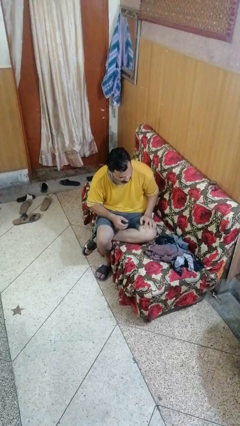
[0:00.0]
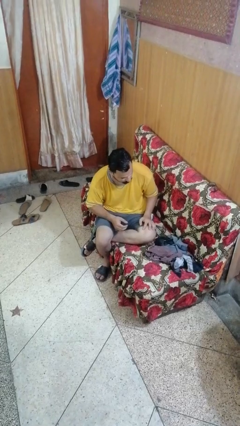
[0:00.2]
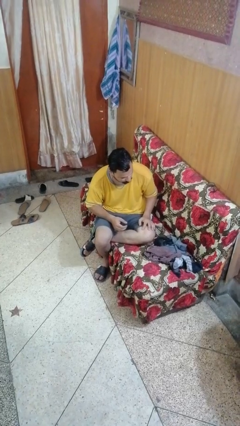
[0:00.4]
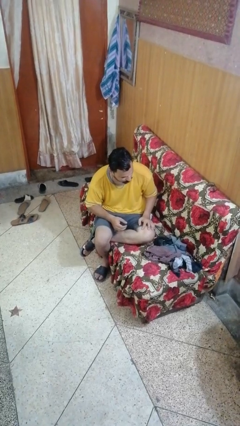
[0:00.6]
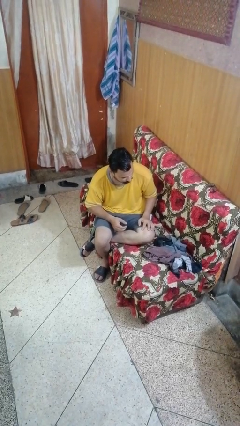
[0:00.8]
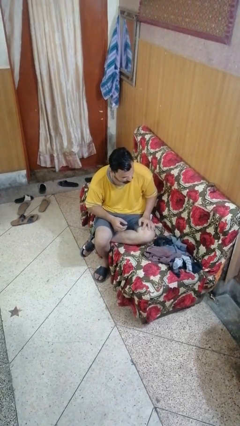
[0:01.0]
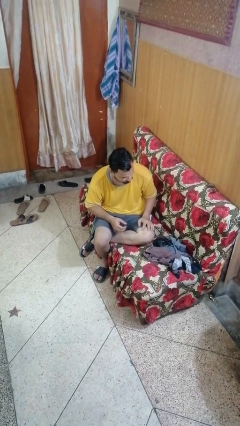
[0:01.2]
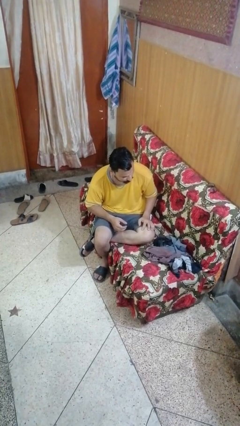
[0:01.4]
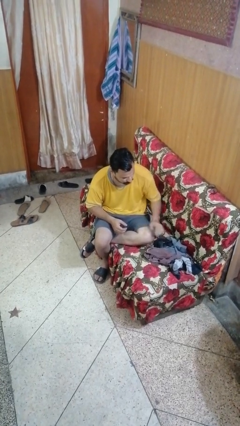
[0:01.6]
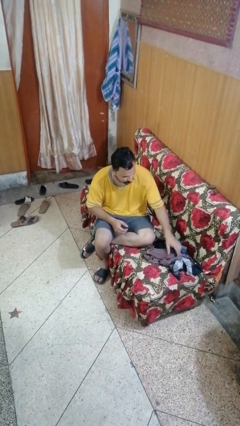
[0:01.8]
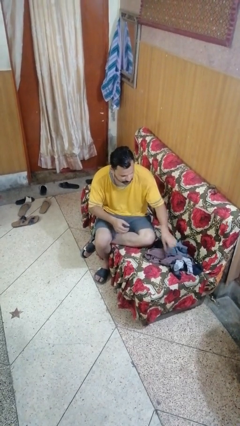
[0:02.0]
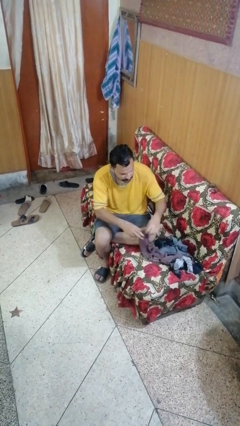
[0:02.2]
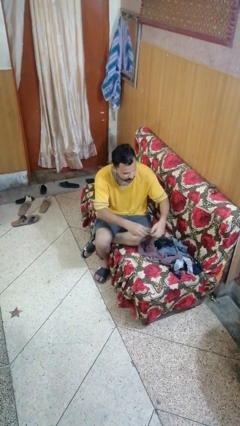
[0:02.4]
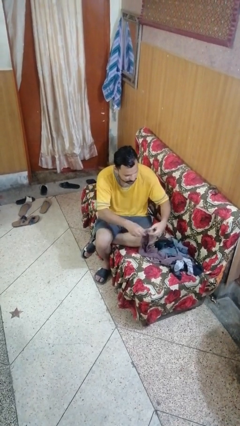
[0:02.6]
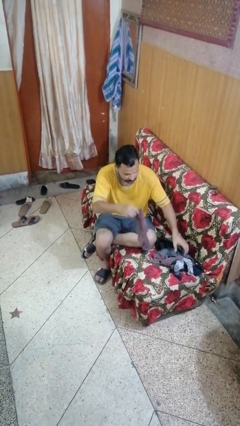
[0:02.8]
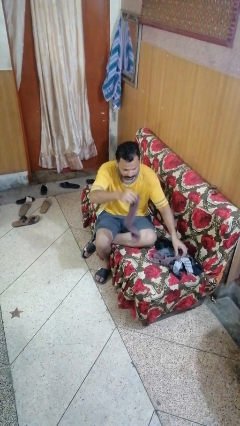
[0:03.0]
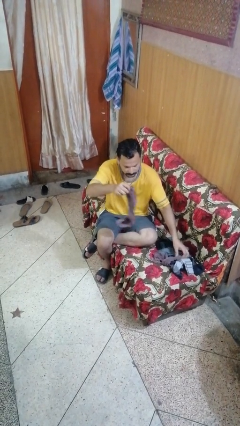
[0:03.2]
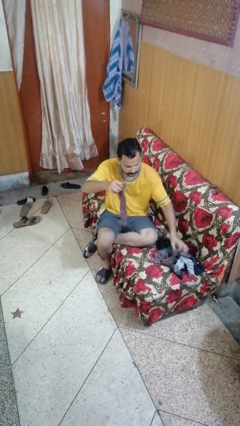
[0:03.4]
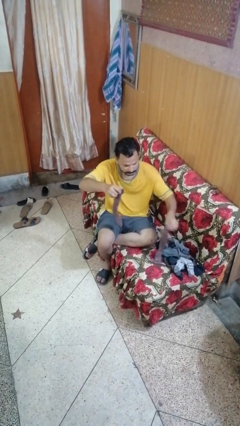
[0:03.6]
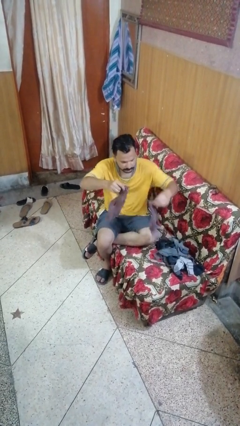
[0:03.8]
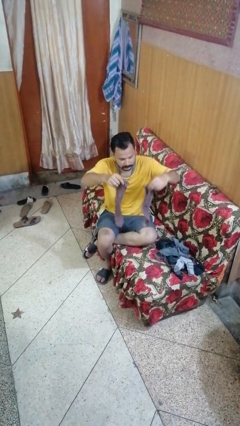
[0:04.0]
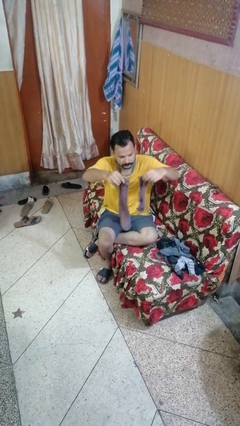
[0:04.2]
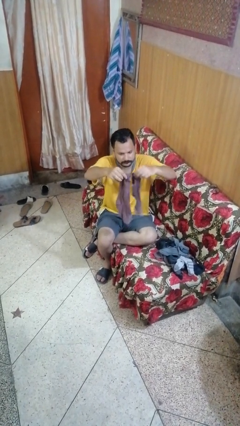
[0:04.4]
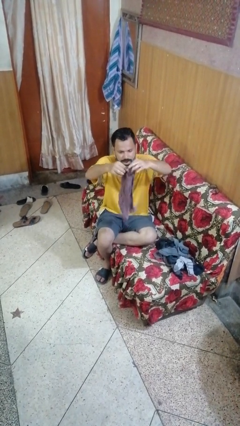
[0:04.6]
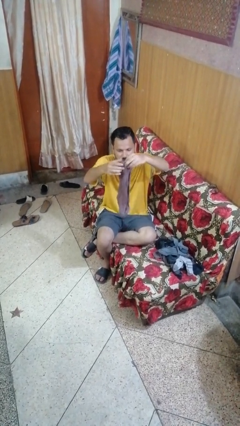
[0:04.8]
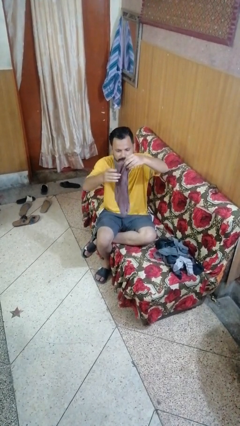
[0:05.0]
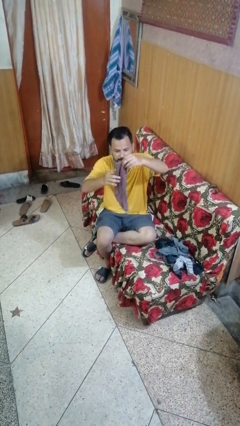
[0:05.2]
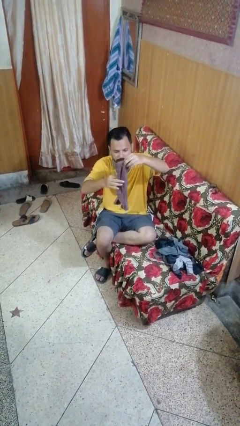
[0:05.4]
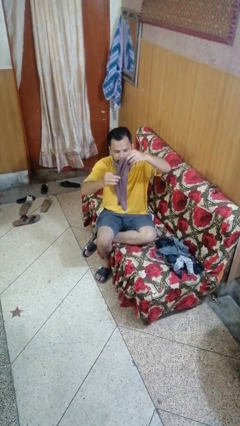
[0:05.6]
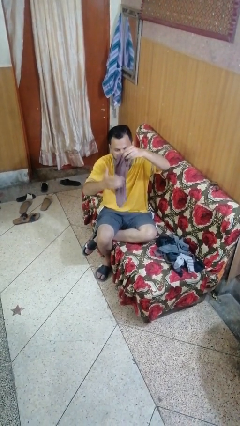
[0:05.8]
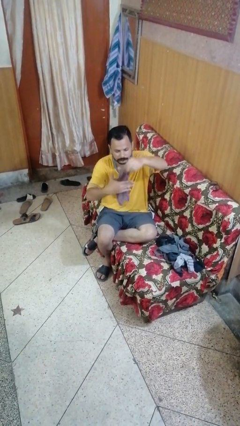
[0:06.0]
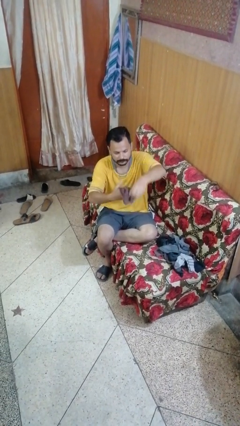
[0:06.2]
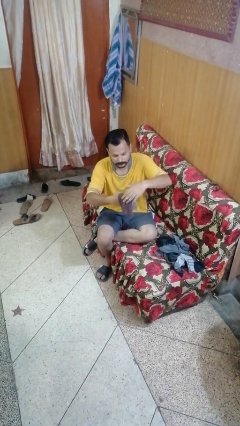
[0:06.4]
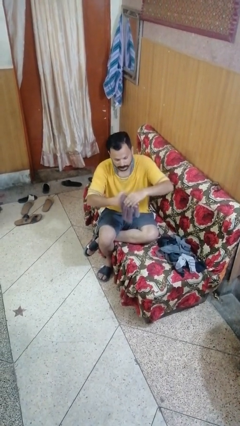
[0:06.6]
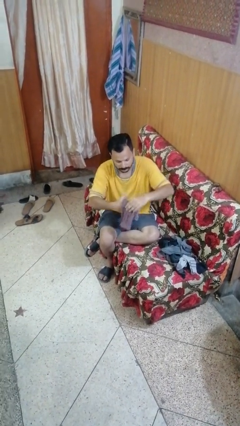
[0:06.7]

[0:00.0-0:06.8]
person folds socks

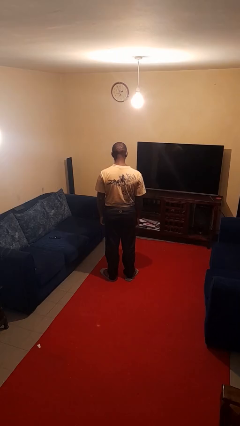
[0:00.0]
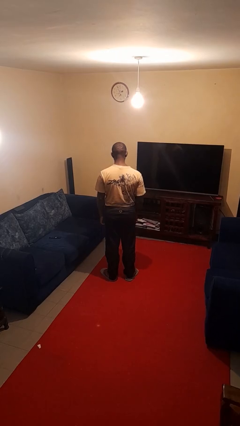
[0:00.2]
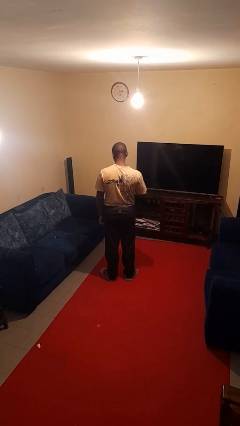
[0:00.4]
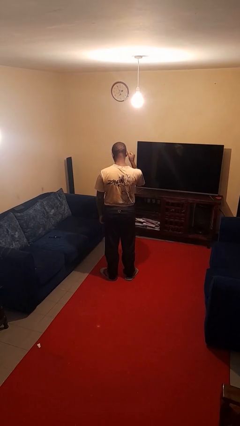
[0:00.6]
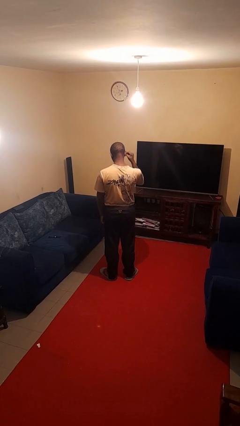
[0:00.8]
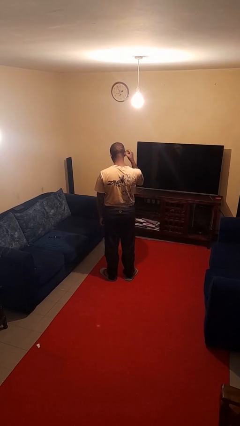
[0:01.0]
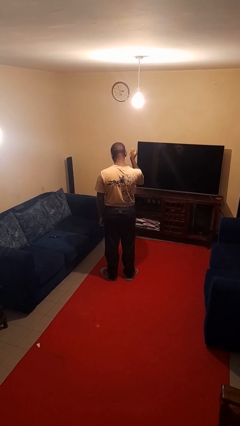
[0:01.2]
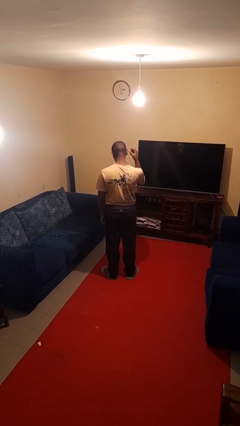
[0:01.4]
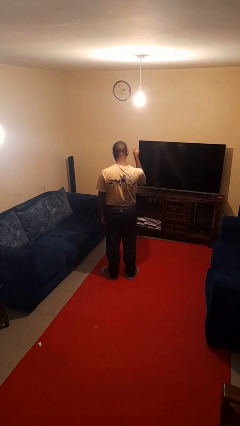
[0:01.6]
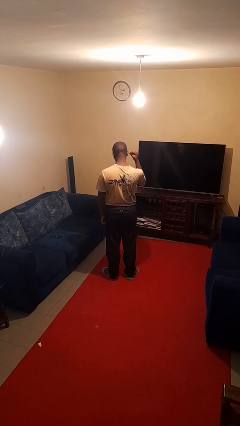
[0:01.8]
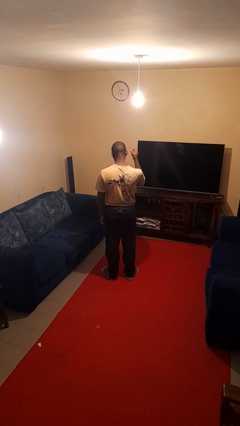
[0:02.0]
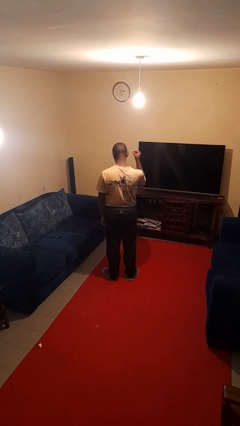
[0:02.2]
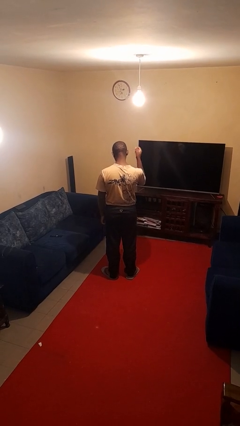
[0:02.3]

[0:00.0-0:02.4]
person snaps fingers

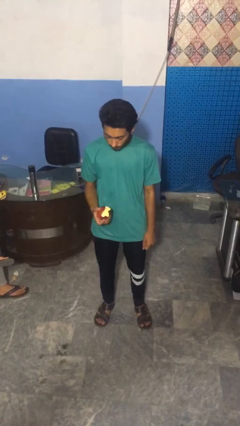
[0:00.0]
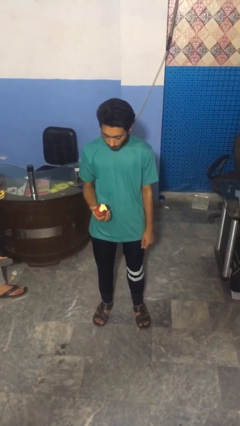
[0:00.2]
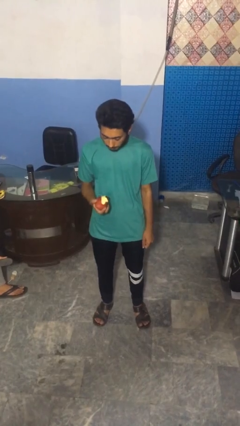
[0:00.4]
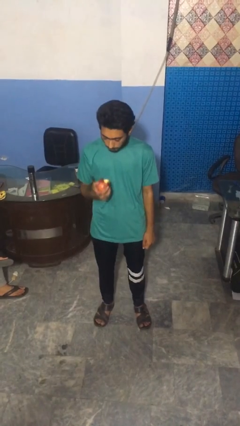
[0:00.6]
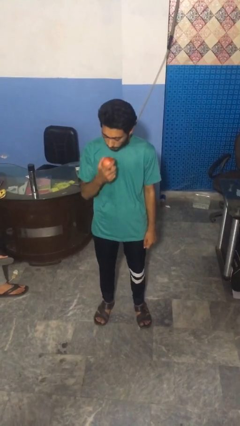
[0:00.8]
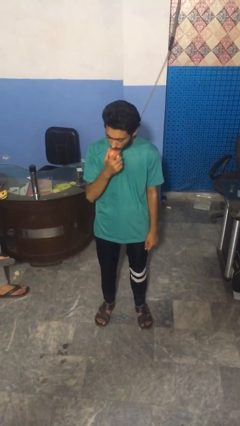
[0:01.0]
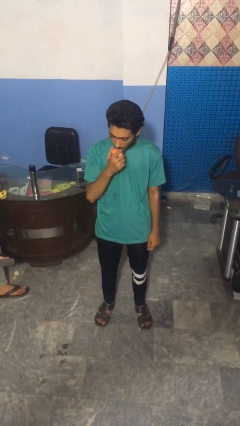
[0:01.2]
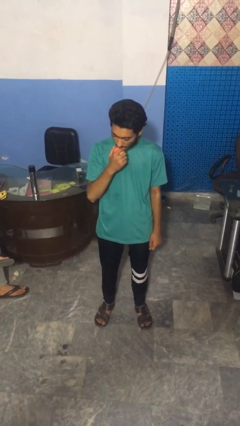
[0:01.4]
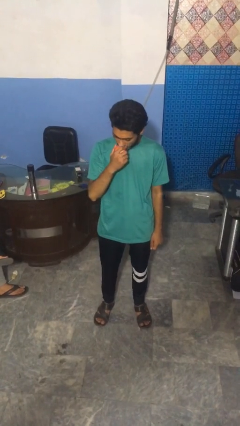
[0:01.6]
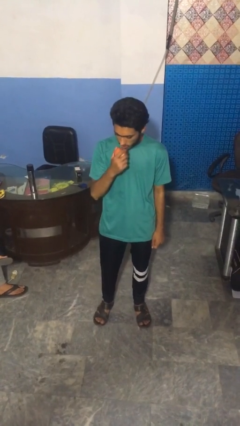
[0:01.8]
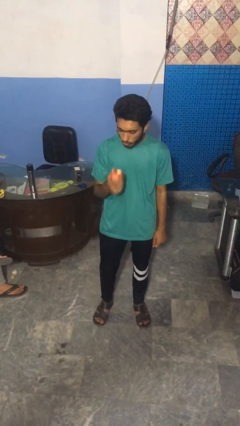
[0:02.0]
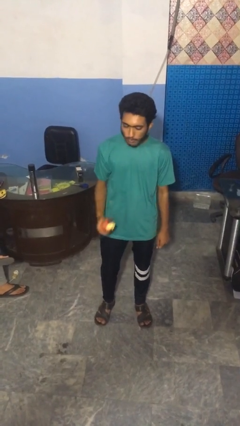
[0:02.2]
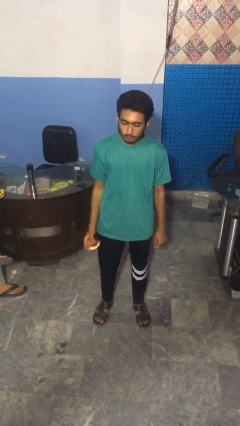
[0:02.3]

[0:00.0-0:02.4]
person eats apple

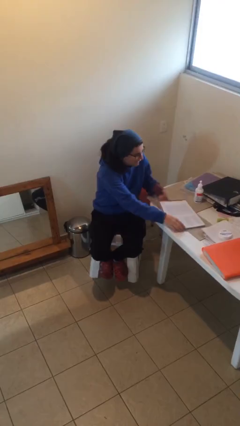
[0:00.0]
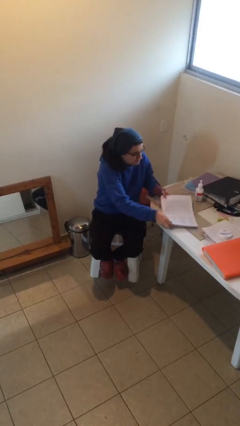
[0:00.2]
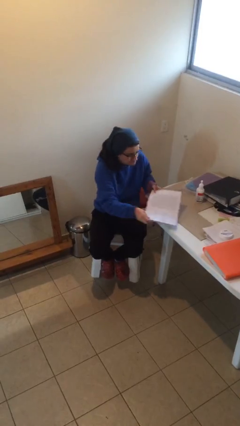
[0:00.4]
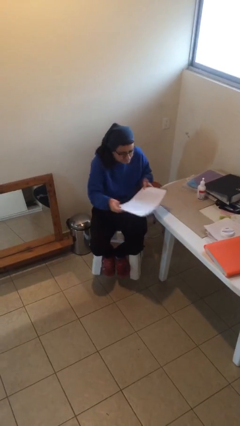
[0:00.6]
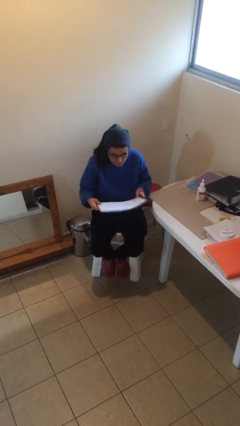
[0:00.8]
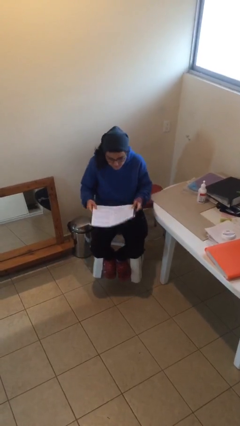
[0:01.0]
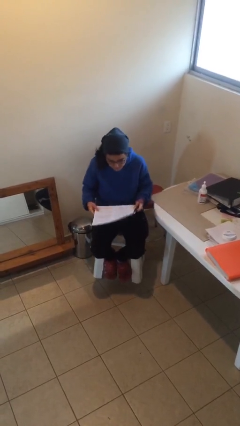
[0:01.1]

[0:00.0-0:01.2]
person picks up object from table

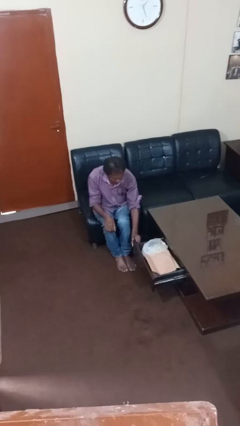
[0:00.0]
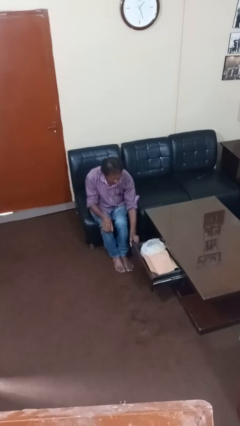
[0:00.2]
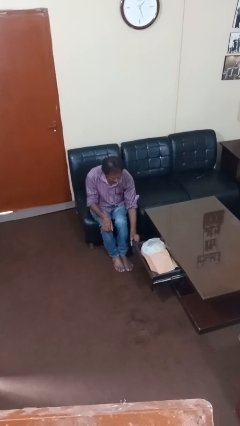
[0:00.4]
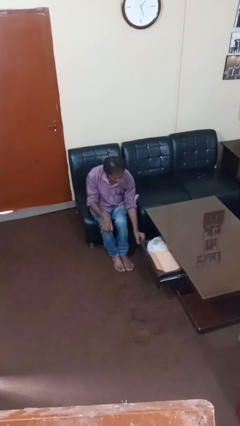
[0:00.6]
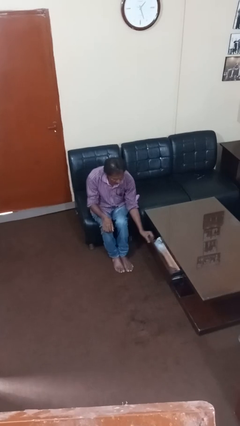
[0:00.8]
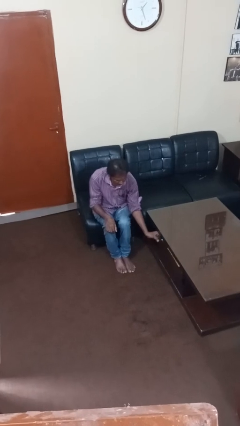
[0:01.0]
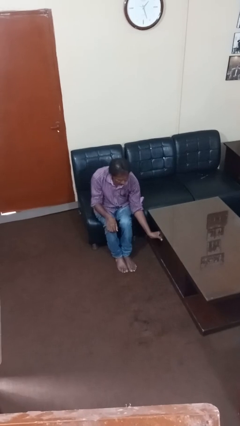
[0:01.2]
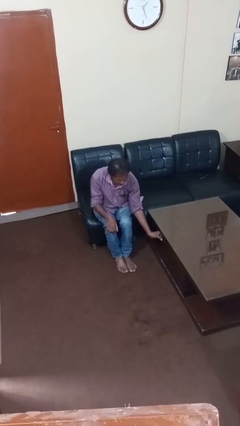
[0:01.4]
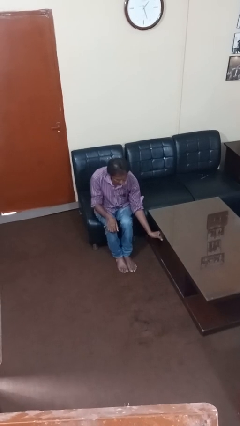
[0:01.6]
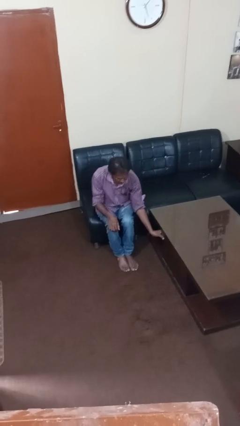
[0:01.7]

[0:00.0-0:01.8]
person closes dresser drawer

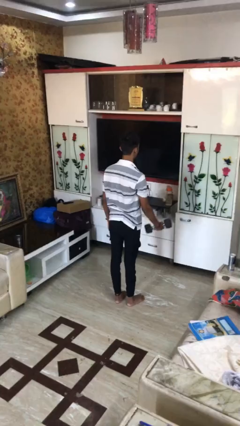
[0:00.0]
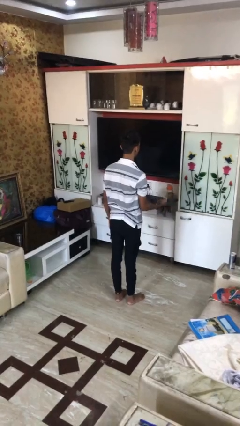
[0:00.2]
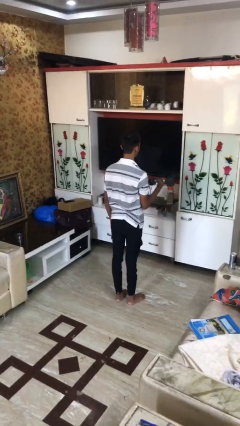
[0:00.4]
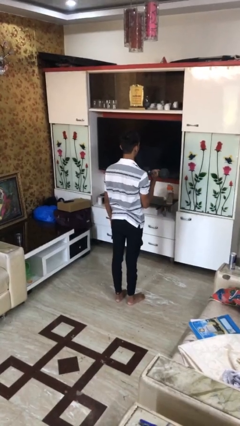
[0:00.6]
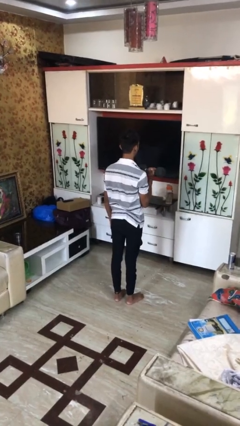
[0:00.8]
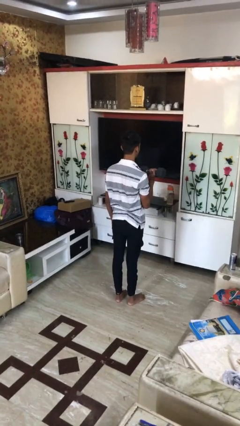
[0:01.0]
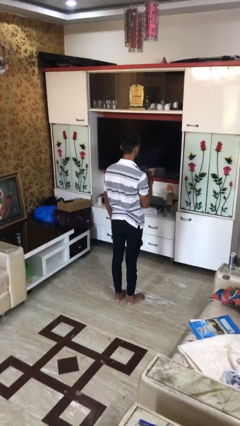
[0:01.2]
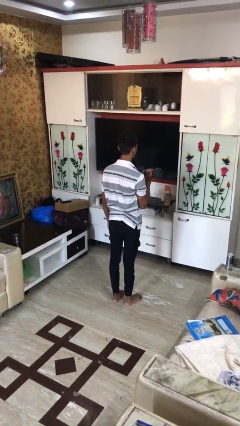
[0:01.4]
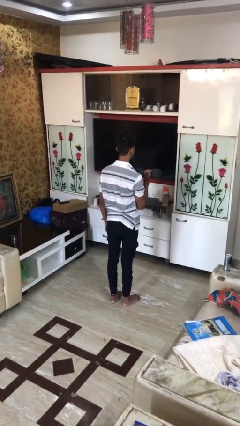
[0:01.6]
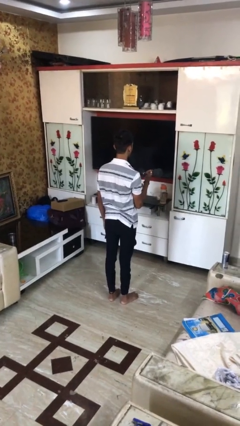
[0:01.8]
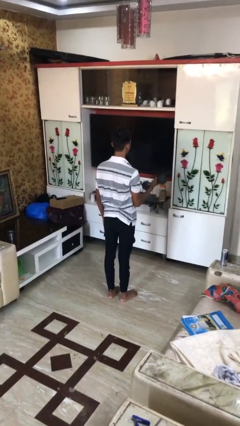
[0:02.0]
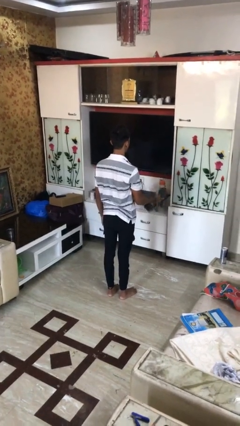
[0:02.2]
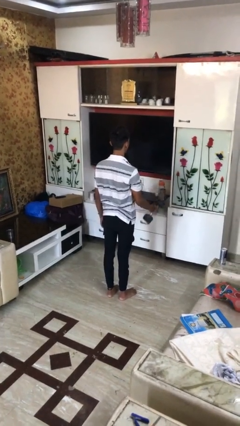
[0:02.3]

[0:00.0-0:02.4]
person lifts dumbbells
